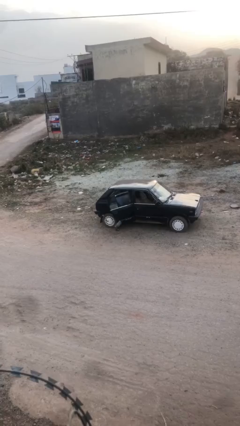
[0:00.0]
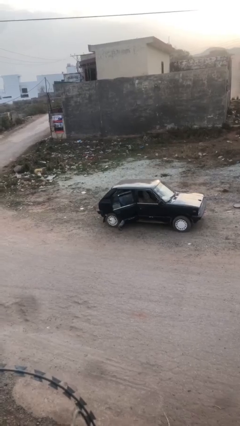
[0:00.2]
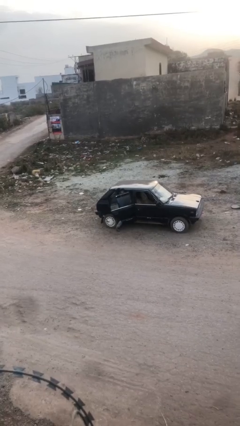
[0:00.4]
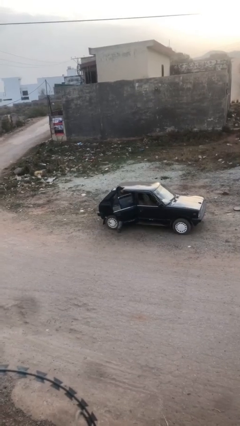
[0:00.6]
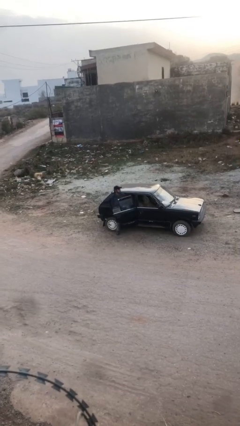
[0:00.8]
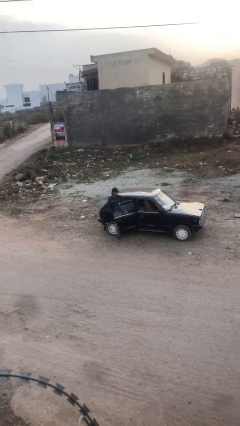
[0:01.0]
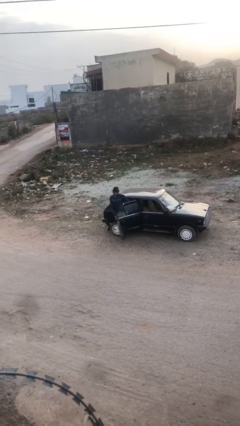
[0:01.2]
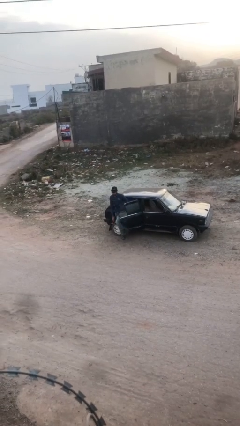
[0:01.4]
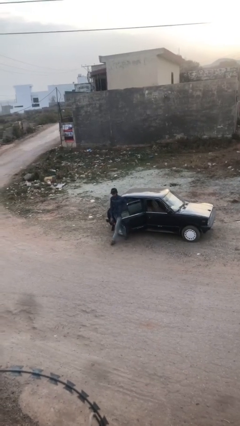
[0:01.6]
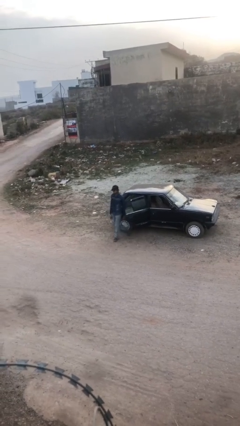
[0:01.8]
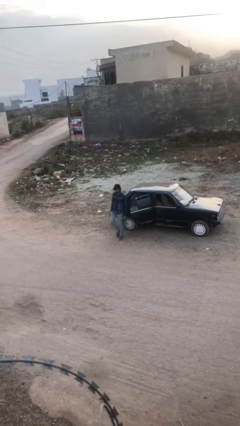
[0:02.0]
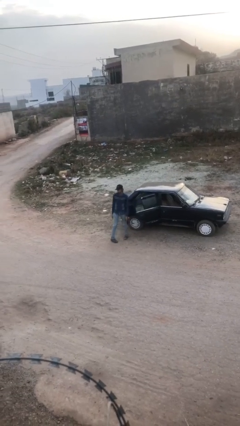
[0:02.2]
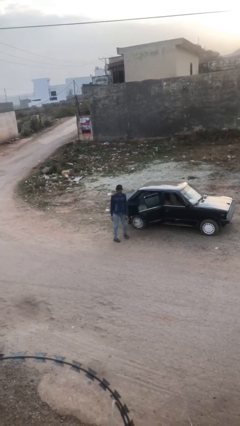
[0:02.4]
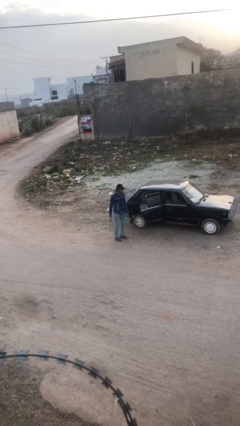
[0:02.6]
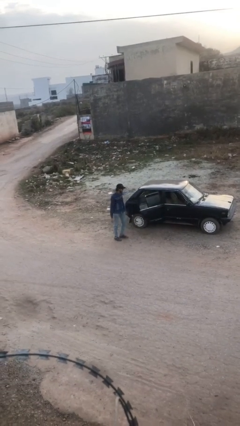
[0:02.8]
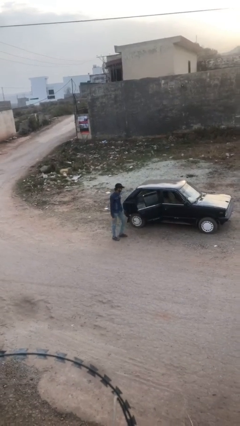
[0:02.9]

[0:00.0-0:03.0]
person exits car

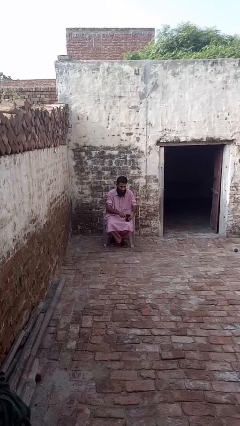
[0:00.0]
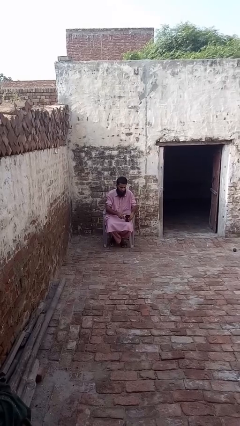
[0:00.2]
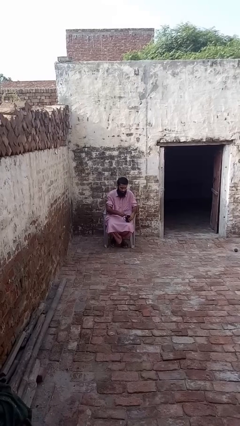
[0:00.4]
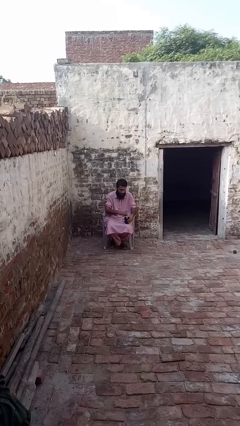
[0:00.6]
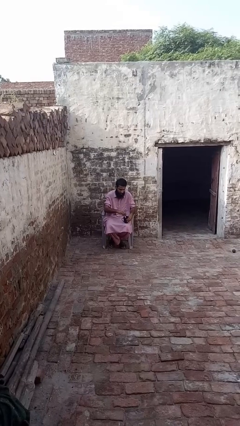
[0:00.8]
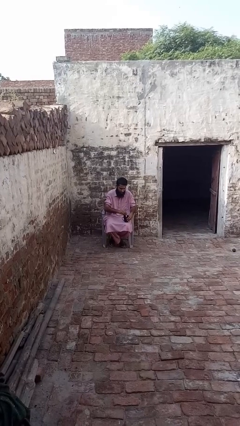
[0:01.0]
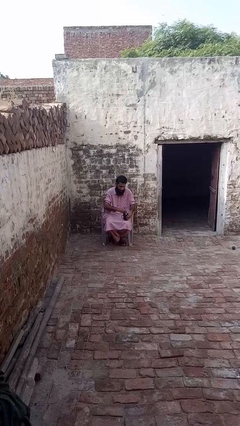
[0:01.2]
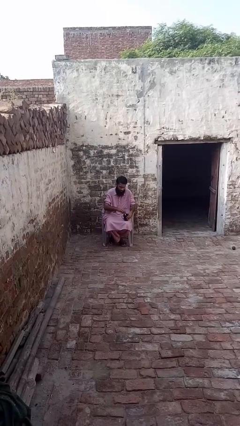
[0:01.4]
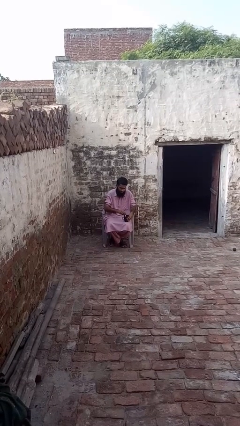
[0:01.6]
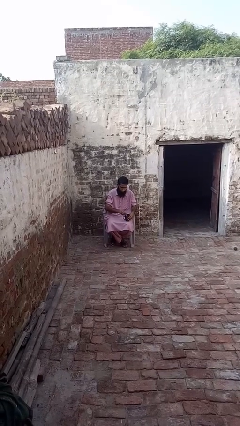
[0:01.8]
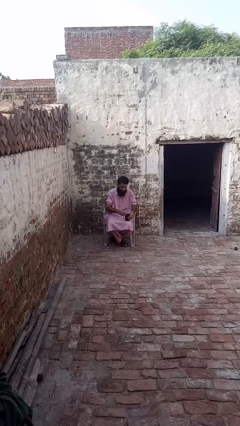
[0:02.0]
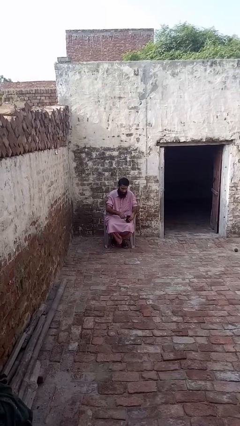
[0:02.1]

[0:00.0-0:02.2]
person stirs mug

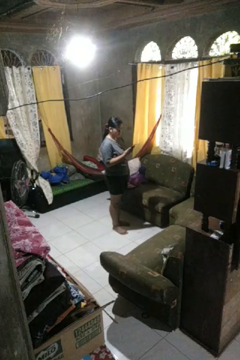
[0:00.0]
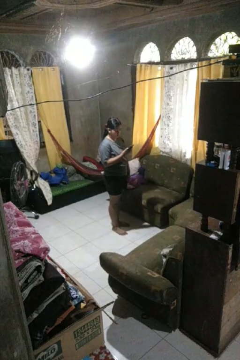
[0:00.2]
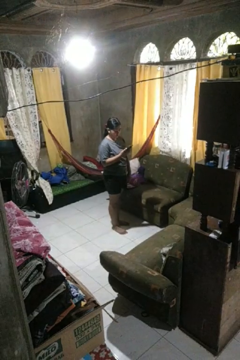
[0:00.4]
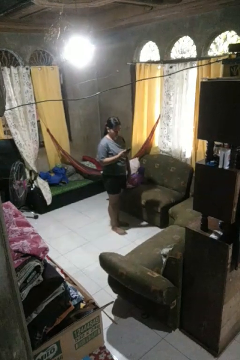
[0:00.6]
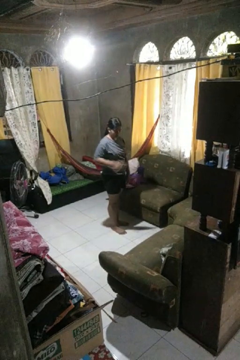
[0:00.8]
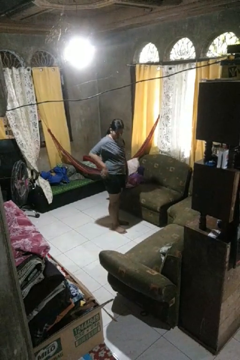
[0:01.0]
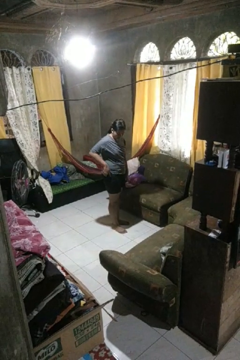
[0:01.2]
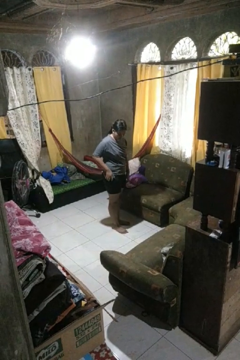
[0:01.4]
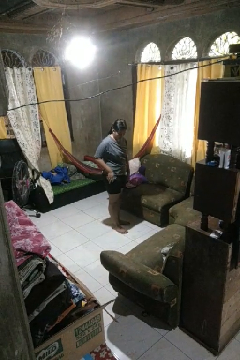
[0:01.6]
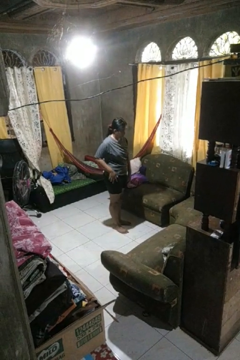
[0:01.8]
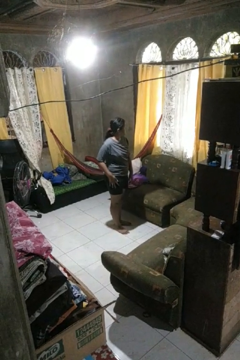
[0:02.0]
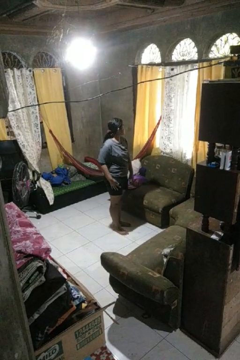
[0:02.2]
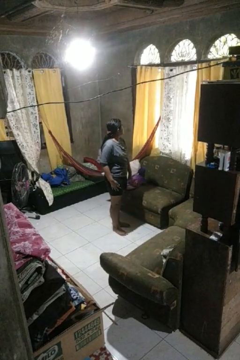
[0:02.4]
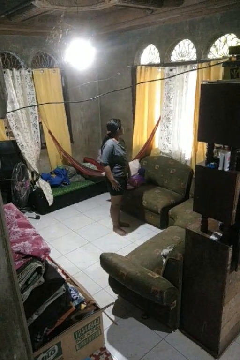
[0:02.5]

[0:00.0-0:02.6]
person puts phone into pocket

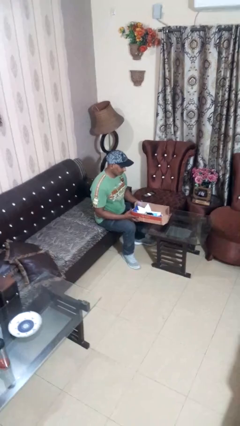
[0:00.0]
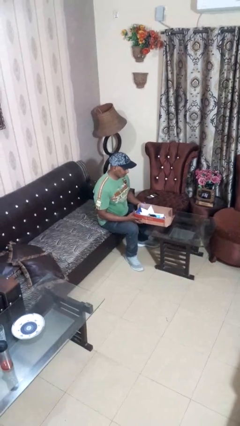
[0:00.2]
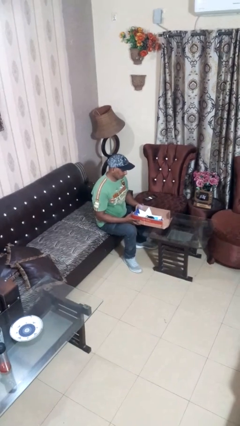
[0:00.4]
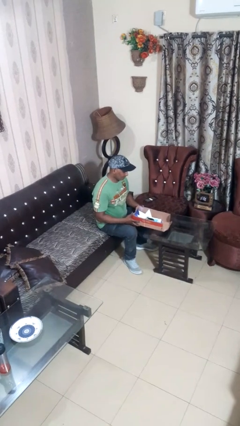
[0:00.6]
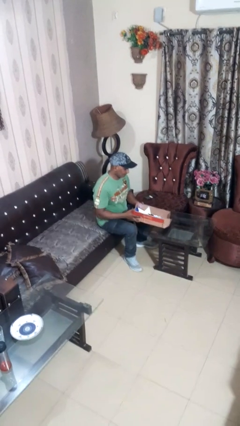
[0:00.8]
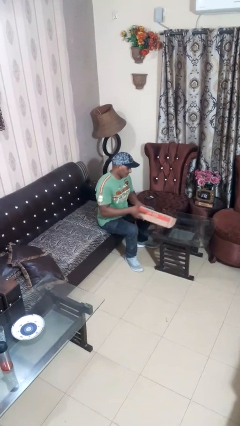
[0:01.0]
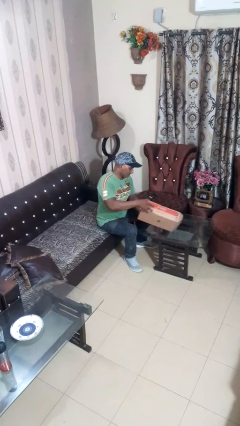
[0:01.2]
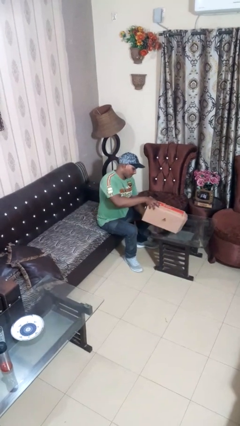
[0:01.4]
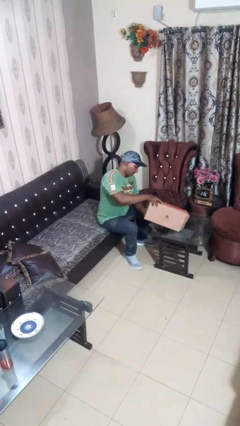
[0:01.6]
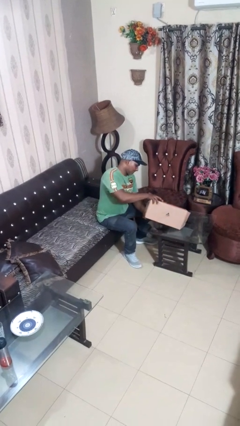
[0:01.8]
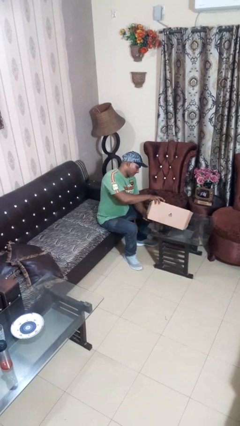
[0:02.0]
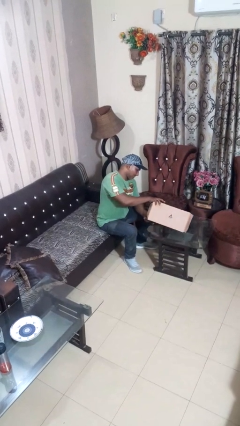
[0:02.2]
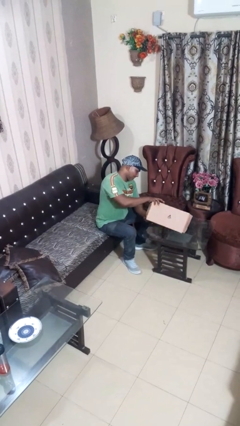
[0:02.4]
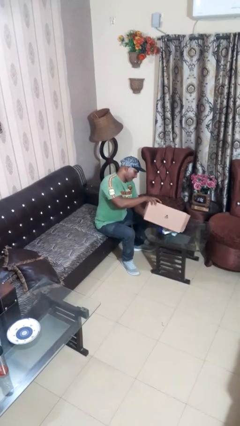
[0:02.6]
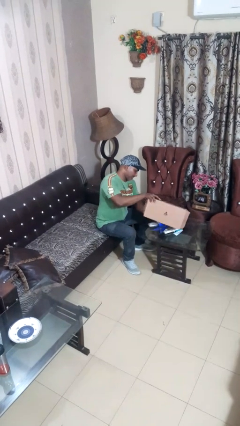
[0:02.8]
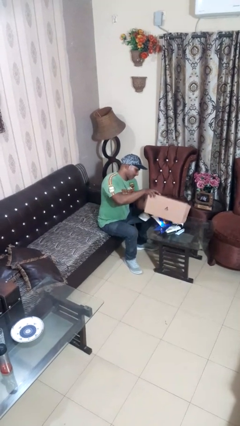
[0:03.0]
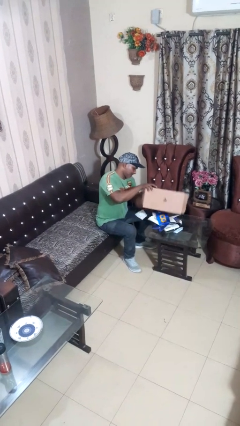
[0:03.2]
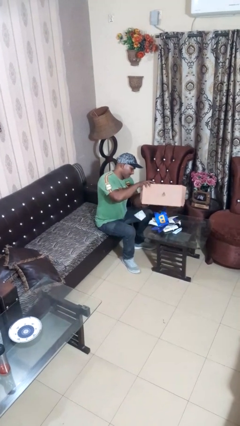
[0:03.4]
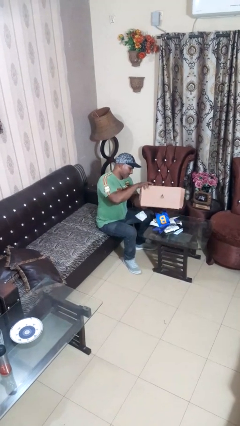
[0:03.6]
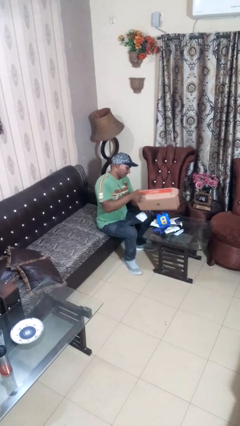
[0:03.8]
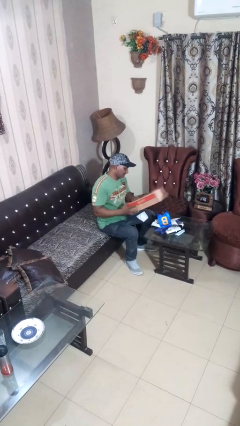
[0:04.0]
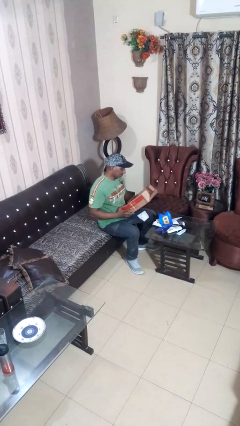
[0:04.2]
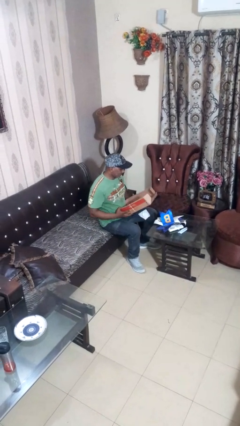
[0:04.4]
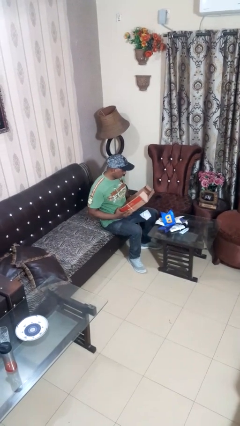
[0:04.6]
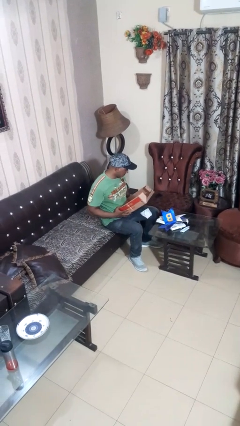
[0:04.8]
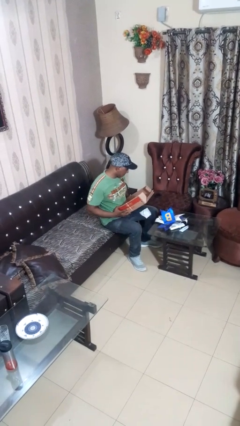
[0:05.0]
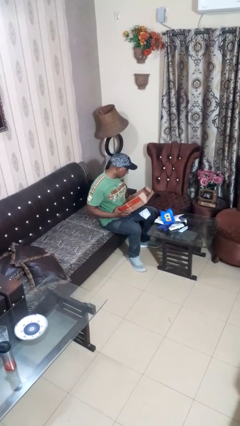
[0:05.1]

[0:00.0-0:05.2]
person unloads box onto table

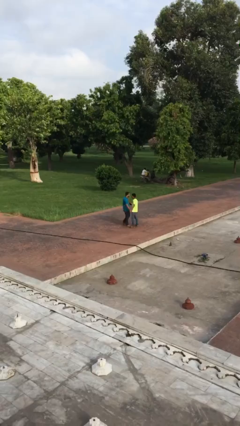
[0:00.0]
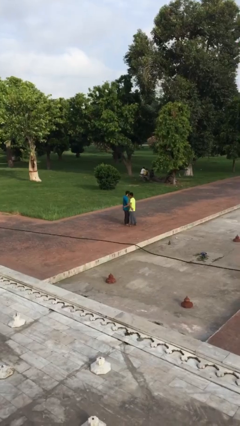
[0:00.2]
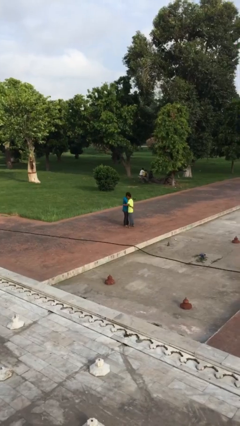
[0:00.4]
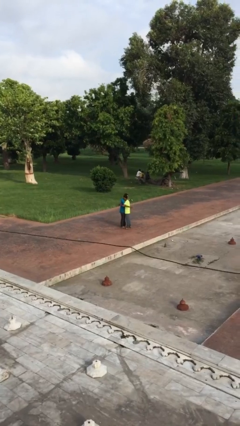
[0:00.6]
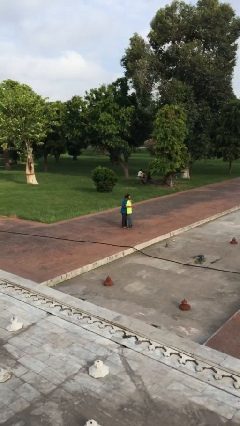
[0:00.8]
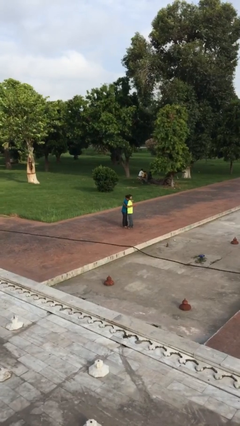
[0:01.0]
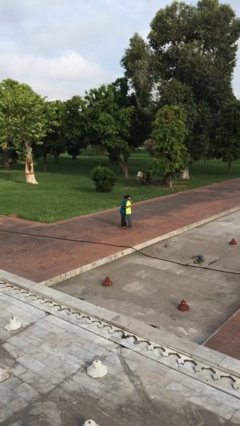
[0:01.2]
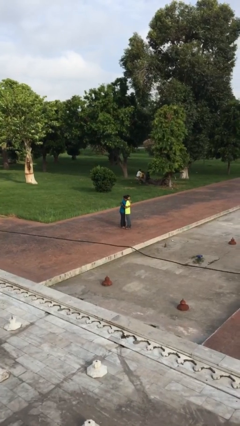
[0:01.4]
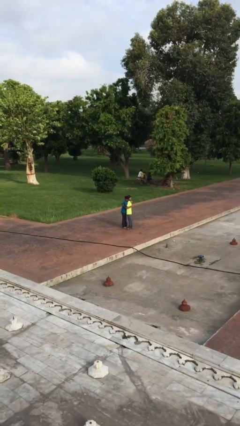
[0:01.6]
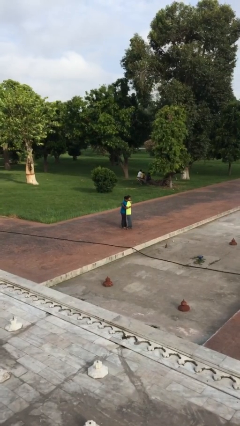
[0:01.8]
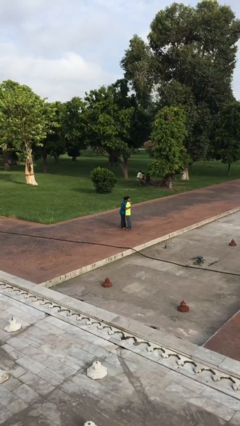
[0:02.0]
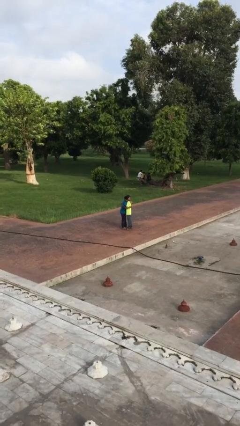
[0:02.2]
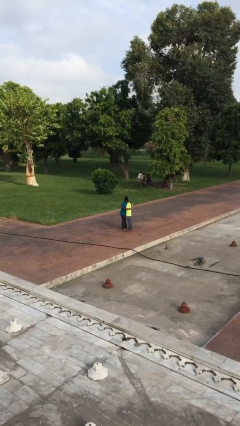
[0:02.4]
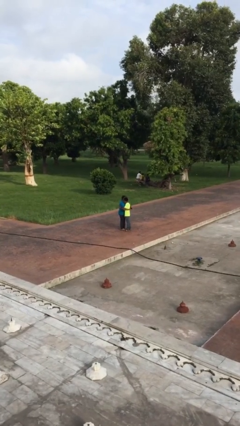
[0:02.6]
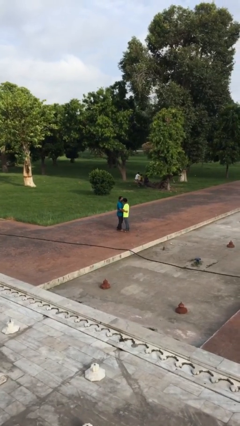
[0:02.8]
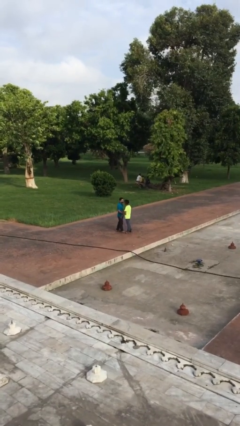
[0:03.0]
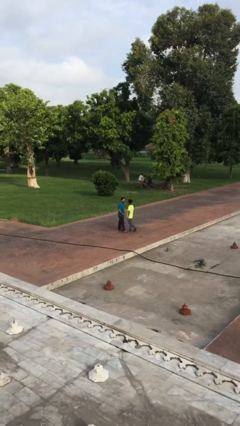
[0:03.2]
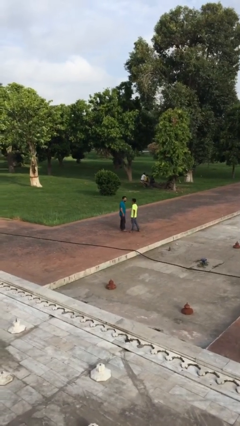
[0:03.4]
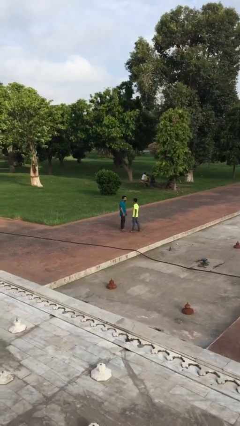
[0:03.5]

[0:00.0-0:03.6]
person embraces person

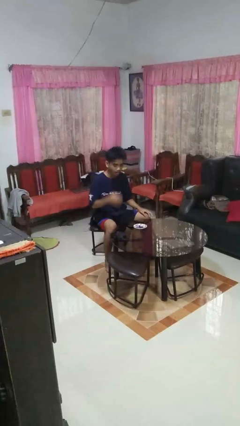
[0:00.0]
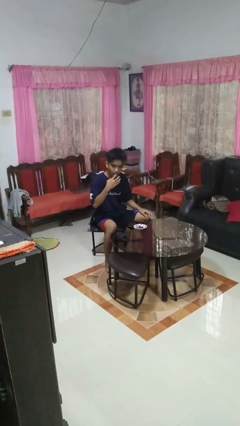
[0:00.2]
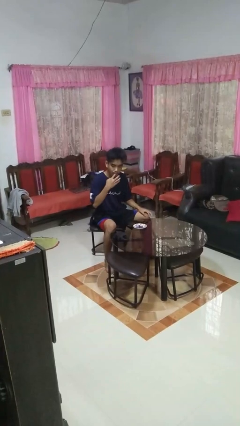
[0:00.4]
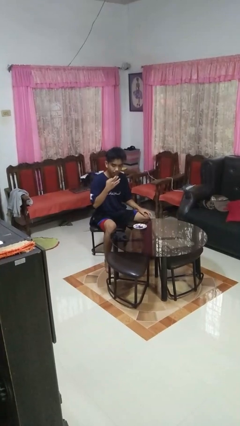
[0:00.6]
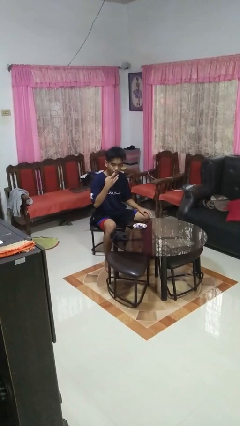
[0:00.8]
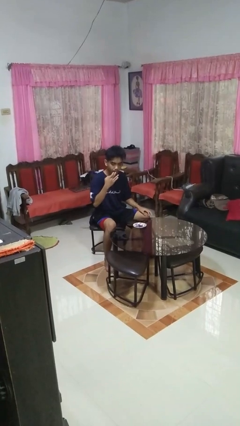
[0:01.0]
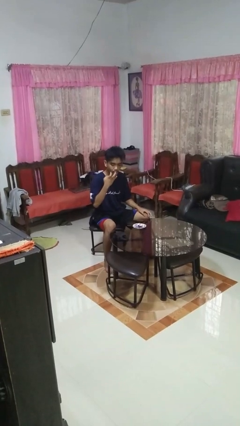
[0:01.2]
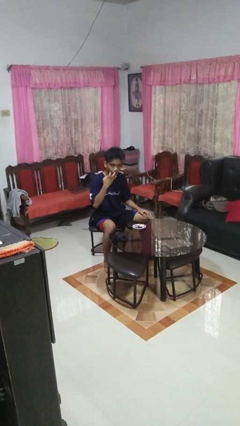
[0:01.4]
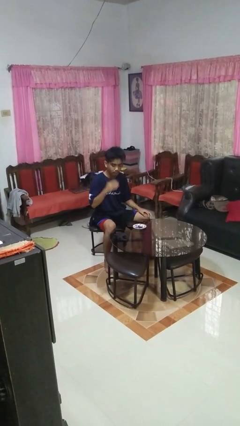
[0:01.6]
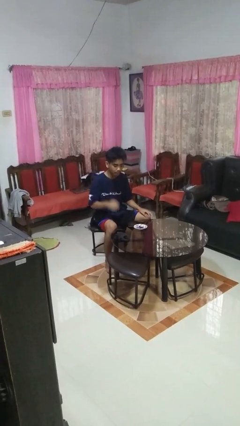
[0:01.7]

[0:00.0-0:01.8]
person licks fingers
